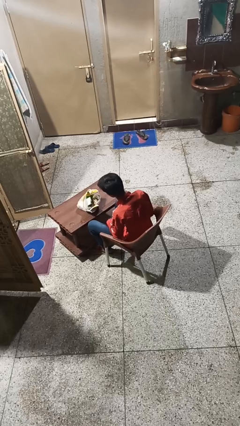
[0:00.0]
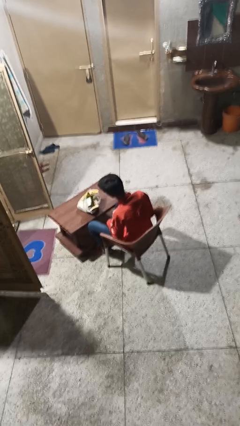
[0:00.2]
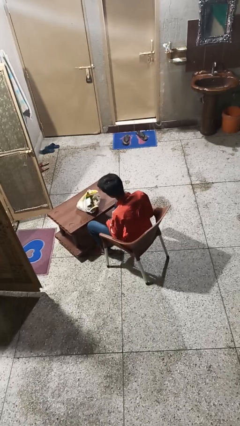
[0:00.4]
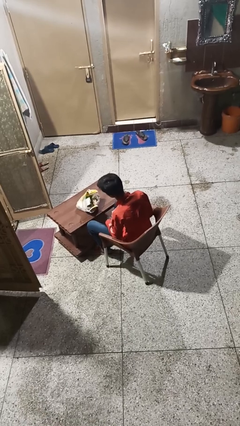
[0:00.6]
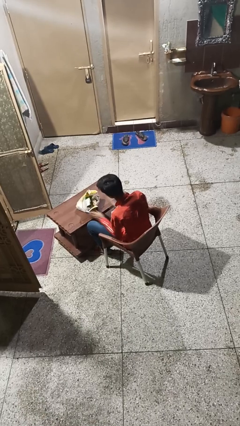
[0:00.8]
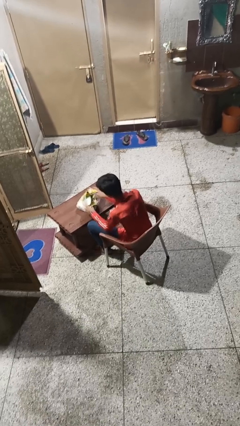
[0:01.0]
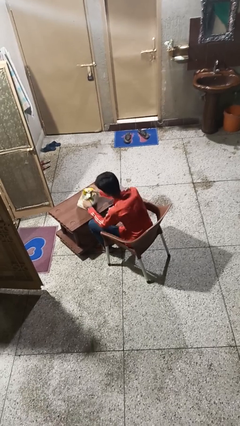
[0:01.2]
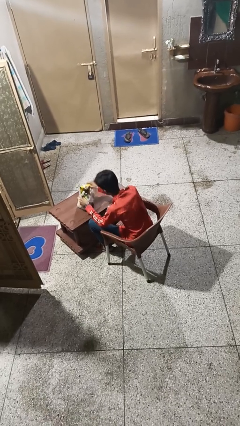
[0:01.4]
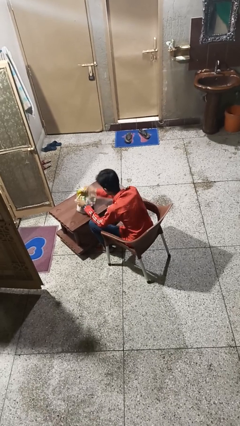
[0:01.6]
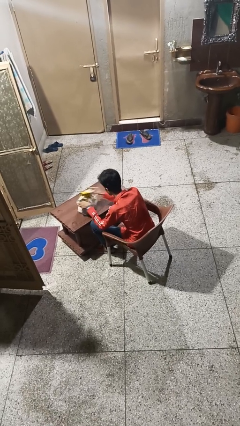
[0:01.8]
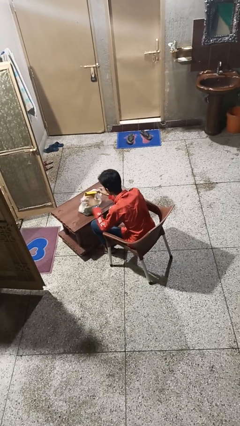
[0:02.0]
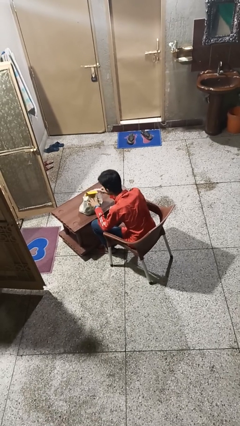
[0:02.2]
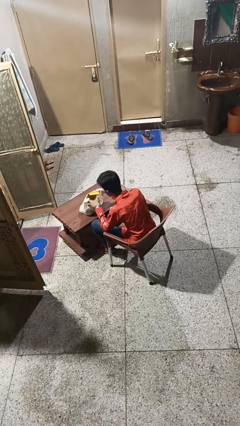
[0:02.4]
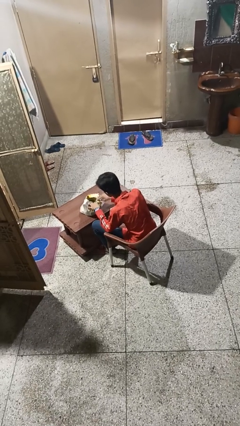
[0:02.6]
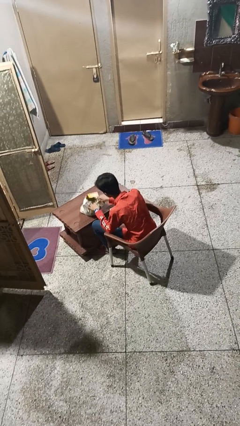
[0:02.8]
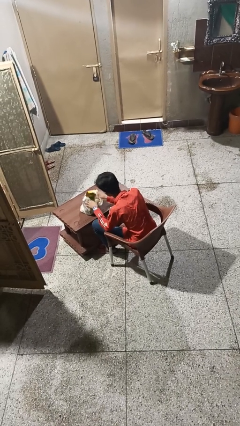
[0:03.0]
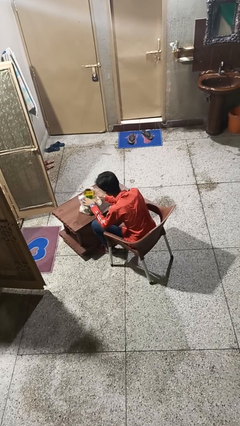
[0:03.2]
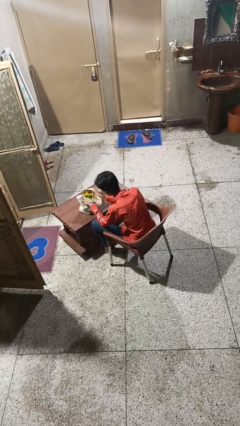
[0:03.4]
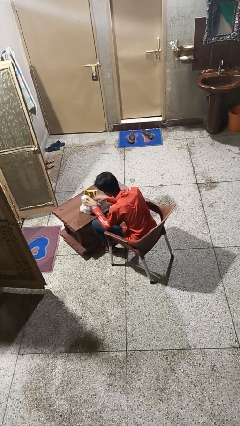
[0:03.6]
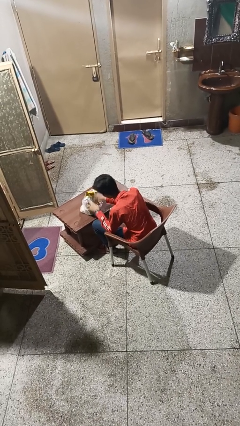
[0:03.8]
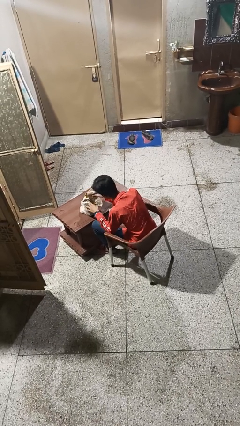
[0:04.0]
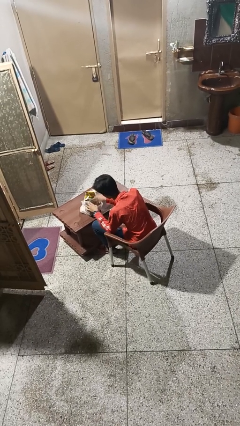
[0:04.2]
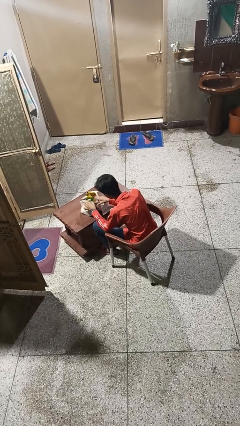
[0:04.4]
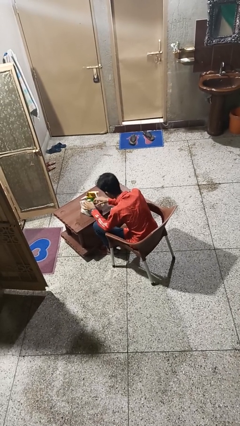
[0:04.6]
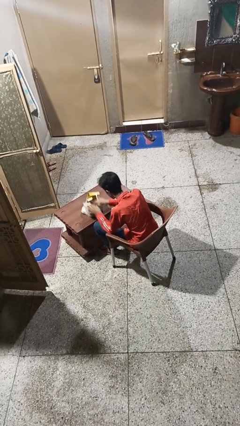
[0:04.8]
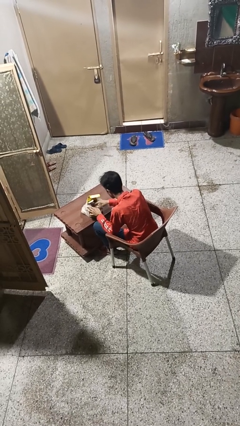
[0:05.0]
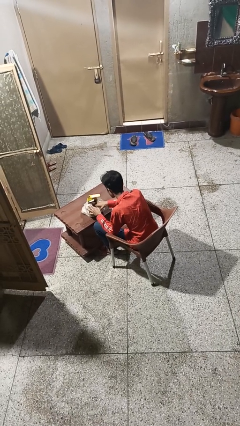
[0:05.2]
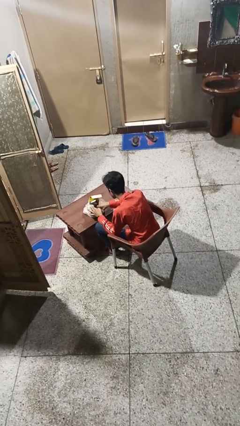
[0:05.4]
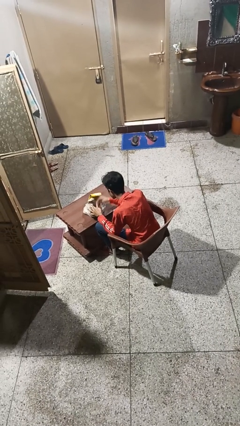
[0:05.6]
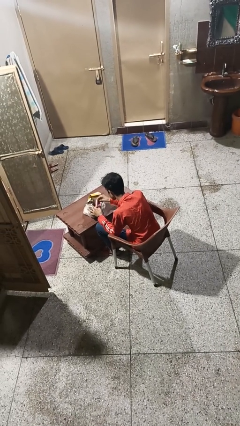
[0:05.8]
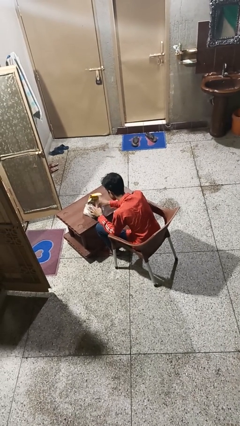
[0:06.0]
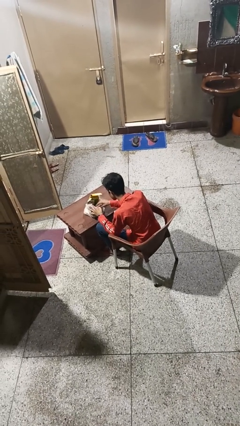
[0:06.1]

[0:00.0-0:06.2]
person searches in bag

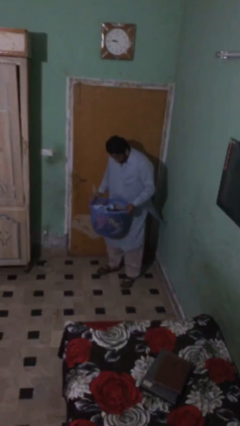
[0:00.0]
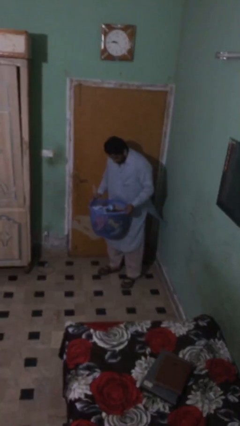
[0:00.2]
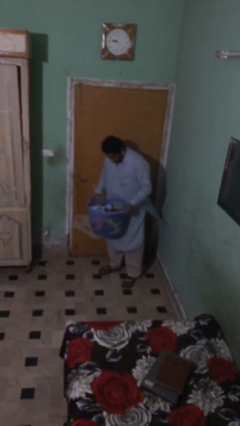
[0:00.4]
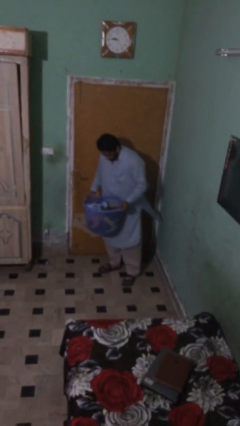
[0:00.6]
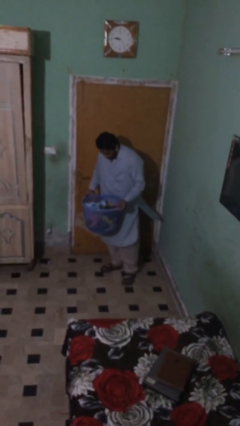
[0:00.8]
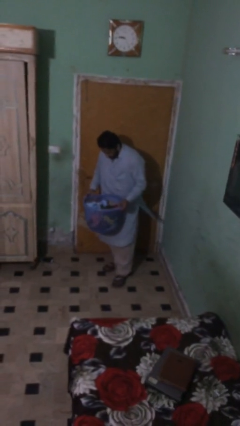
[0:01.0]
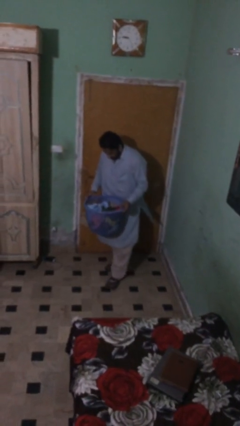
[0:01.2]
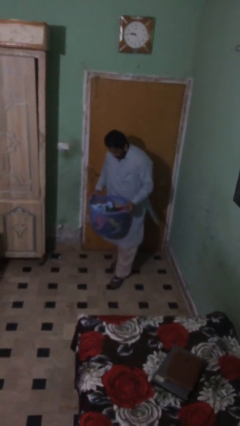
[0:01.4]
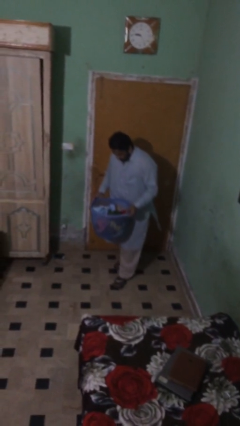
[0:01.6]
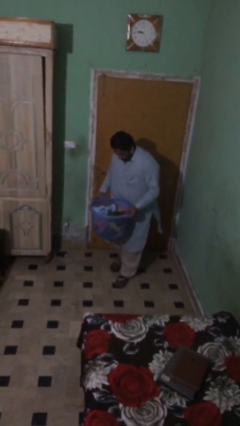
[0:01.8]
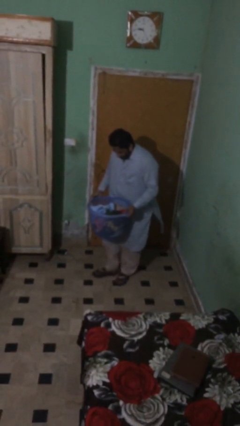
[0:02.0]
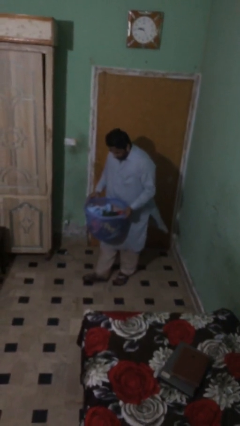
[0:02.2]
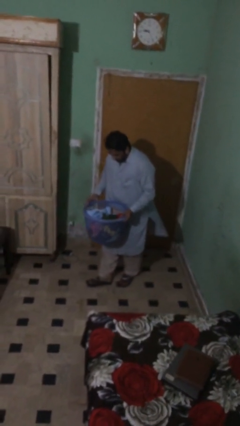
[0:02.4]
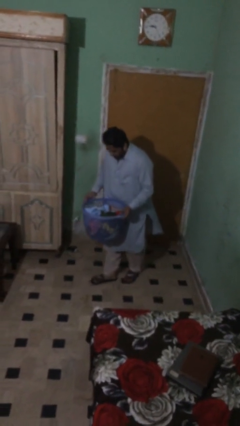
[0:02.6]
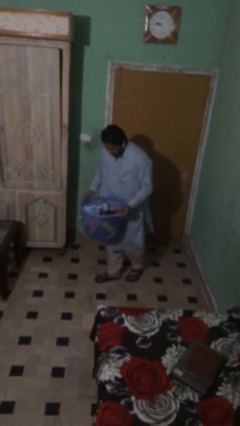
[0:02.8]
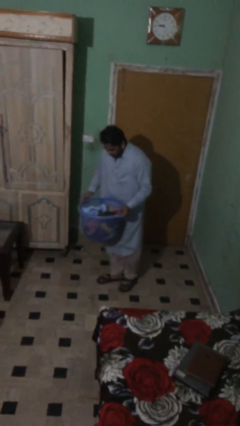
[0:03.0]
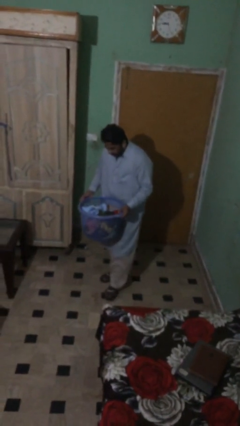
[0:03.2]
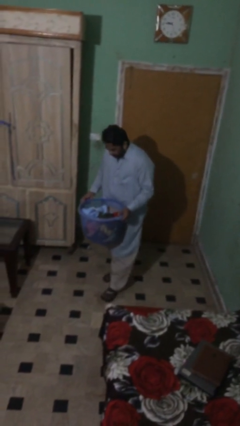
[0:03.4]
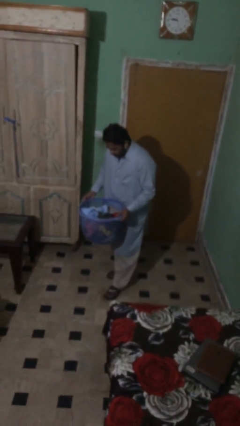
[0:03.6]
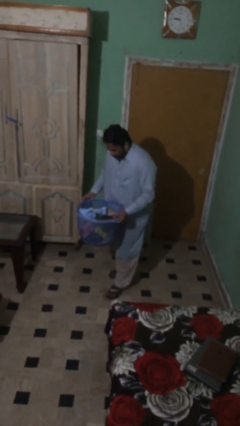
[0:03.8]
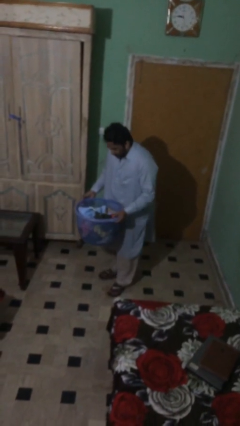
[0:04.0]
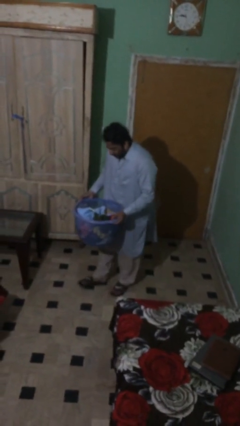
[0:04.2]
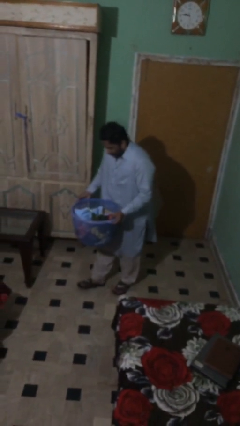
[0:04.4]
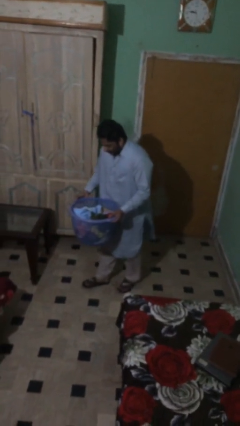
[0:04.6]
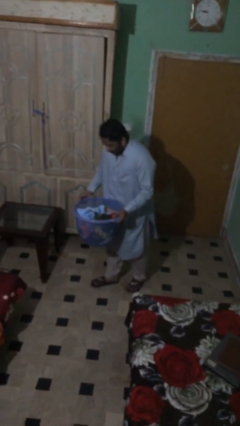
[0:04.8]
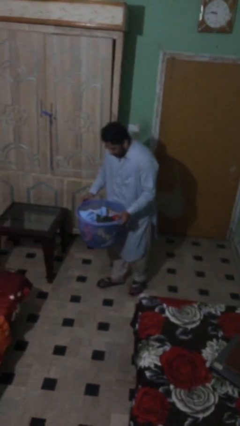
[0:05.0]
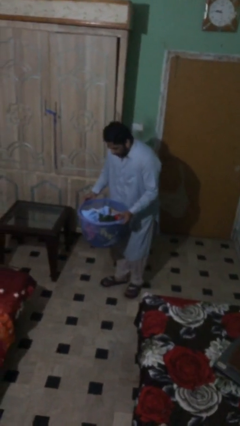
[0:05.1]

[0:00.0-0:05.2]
person carries heavy object

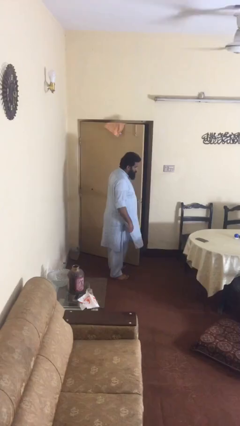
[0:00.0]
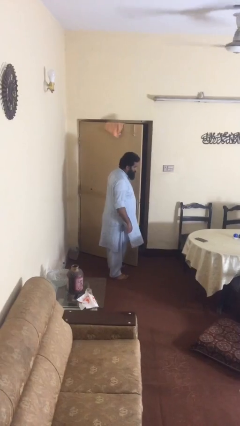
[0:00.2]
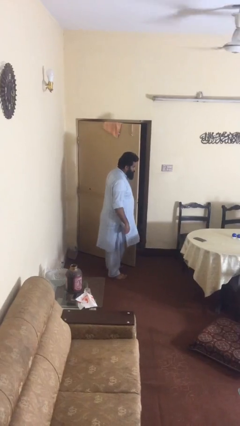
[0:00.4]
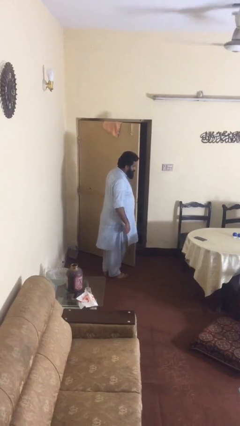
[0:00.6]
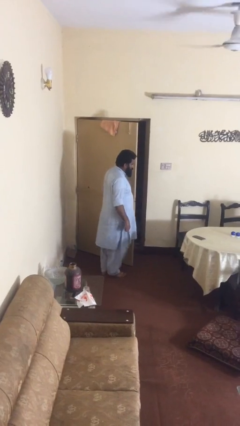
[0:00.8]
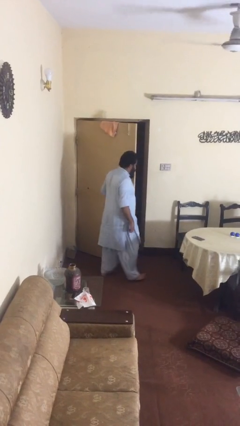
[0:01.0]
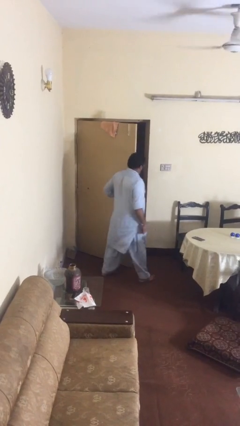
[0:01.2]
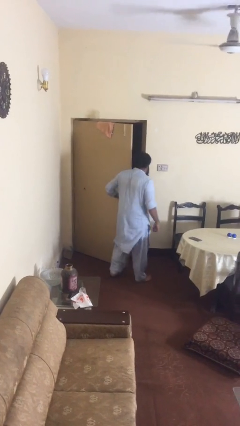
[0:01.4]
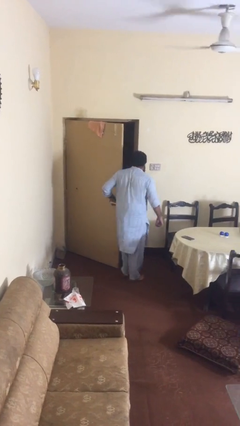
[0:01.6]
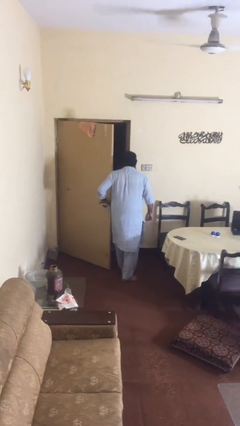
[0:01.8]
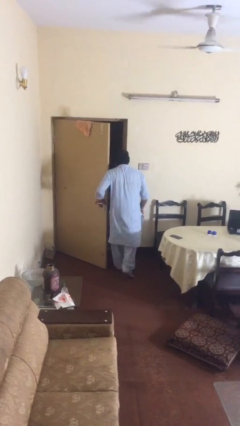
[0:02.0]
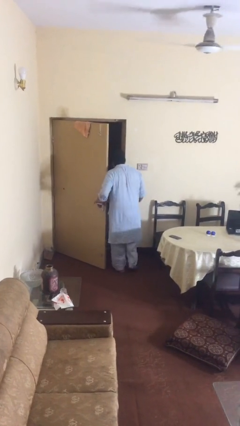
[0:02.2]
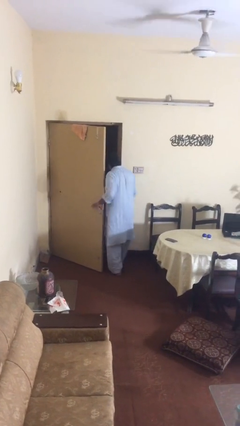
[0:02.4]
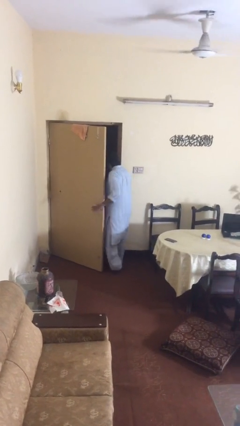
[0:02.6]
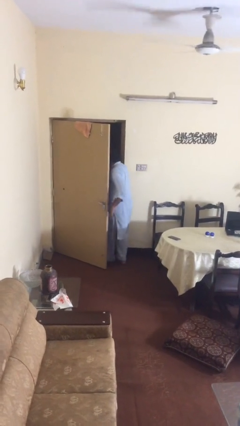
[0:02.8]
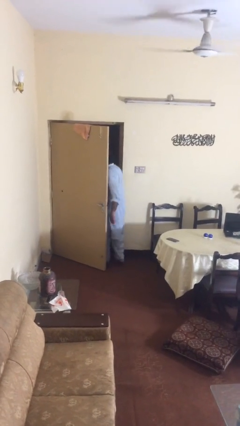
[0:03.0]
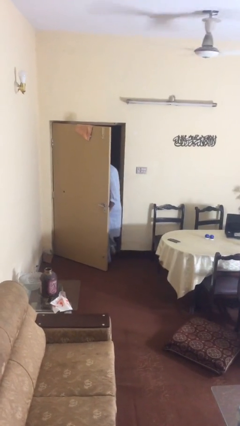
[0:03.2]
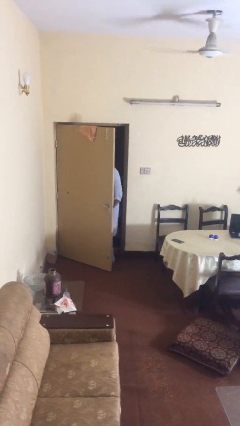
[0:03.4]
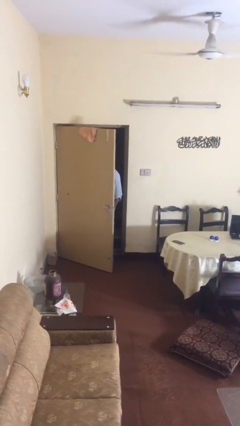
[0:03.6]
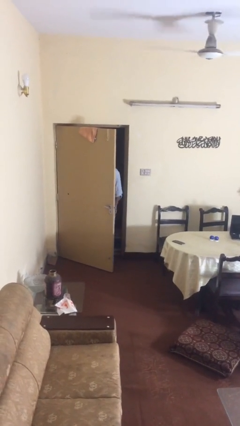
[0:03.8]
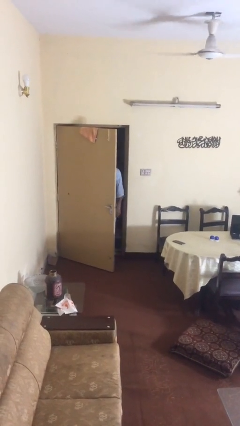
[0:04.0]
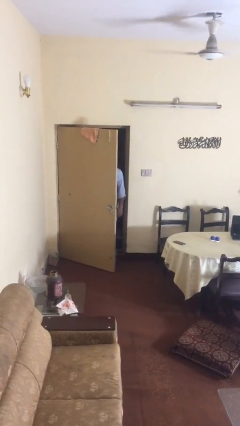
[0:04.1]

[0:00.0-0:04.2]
person exits scene through structure

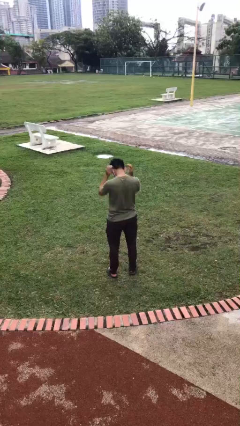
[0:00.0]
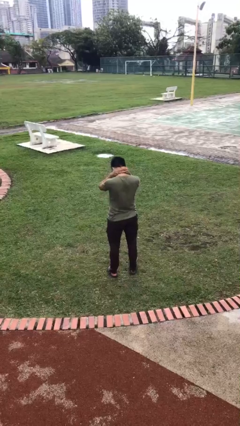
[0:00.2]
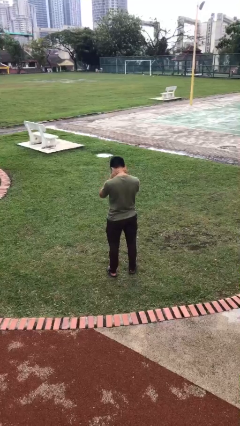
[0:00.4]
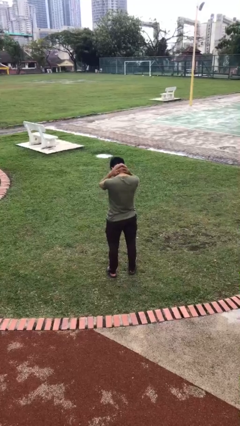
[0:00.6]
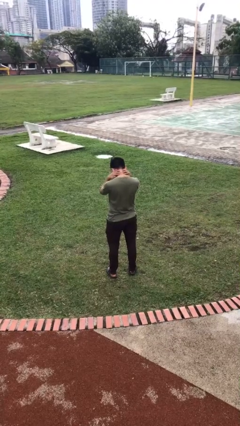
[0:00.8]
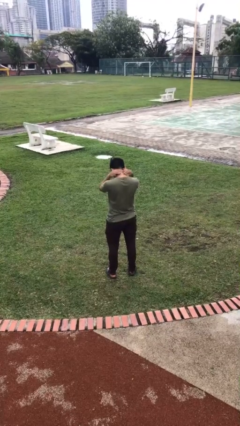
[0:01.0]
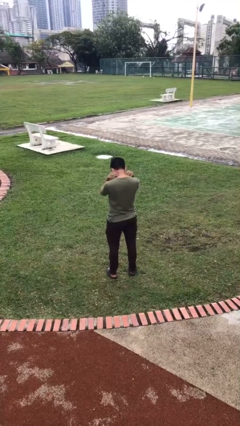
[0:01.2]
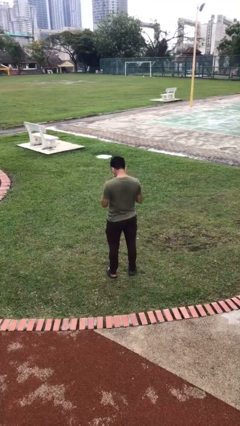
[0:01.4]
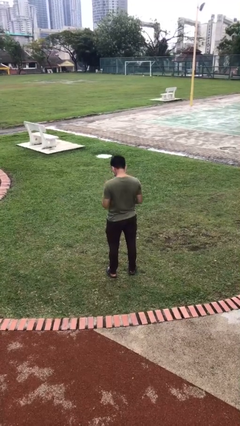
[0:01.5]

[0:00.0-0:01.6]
person rubs neck

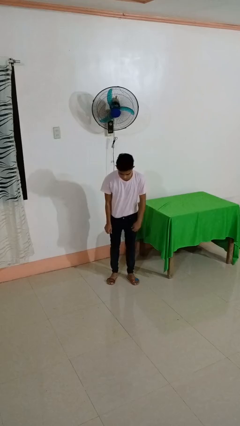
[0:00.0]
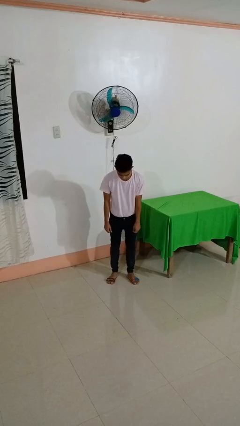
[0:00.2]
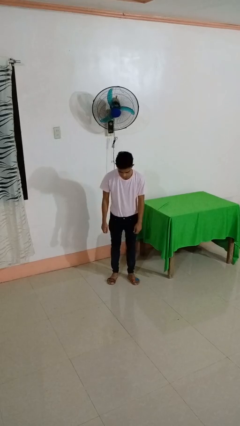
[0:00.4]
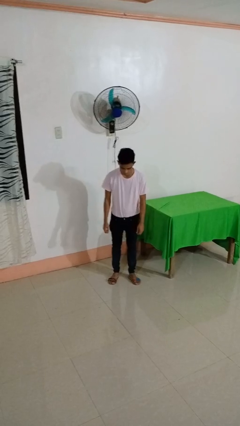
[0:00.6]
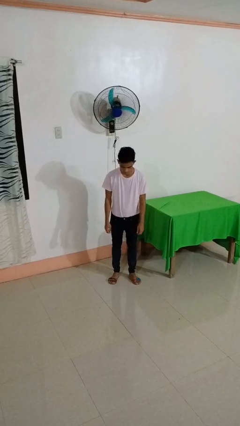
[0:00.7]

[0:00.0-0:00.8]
person hikes up pants
